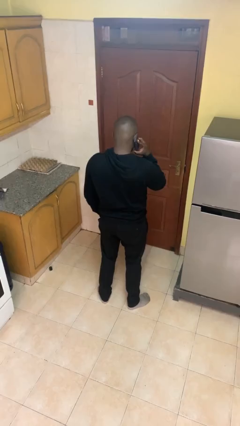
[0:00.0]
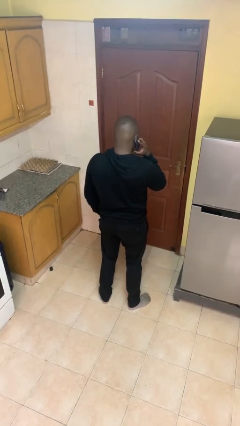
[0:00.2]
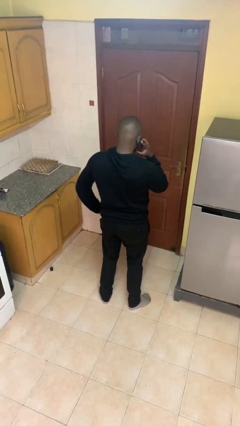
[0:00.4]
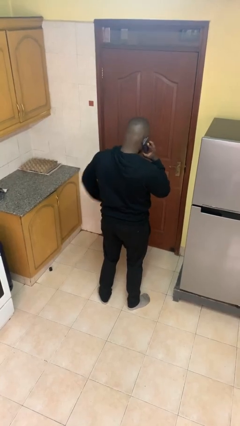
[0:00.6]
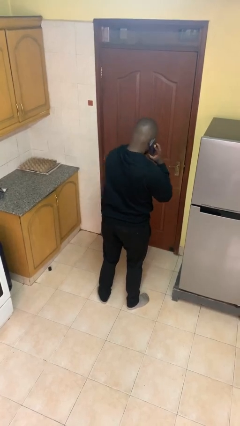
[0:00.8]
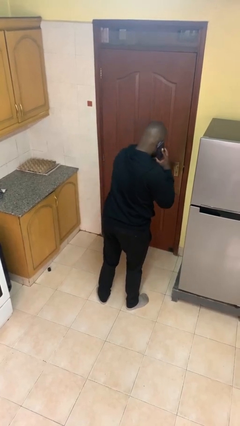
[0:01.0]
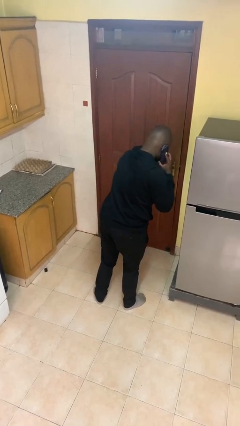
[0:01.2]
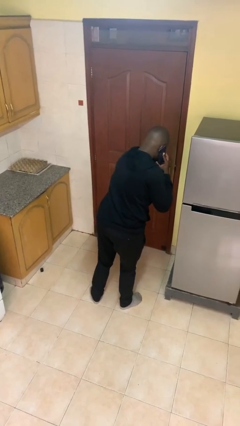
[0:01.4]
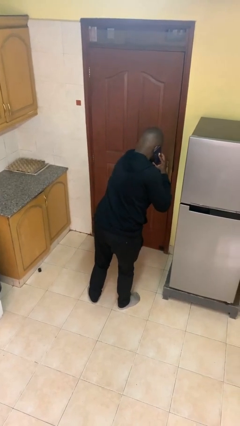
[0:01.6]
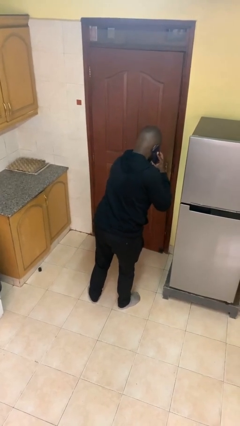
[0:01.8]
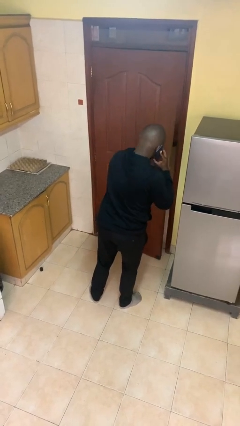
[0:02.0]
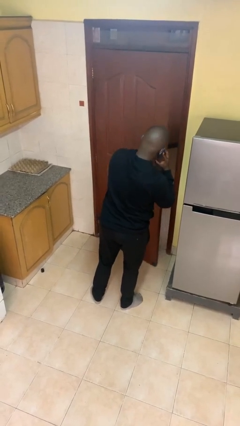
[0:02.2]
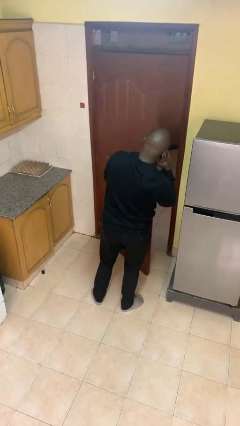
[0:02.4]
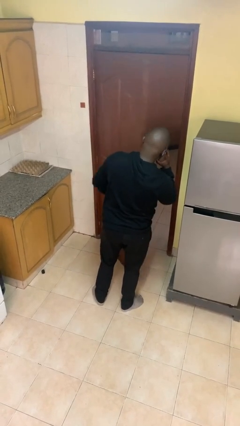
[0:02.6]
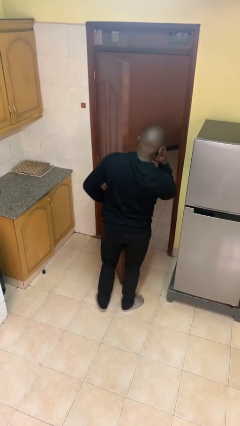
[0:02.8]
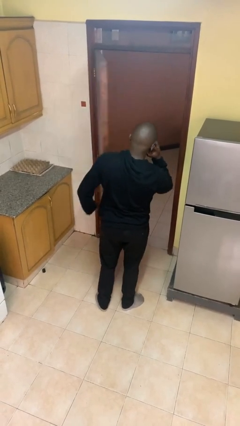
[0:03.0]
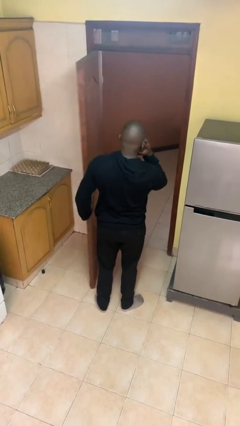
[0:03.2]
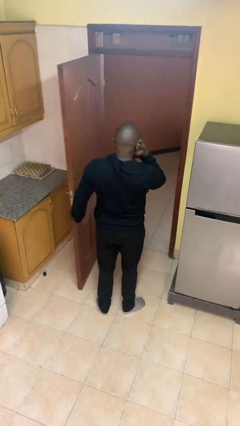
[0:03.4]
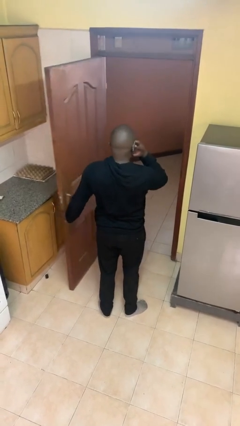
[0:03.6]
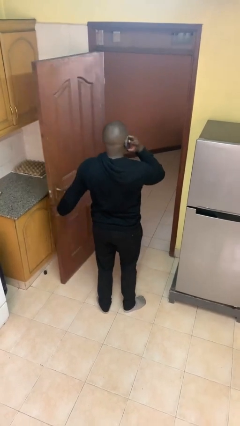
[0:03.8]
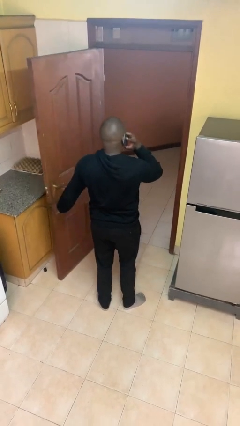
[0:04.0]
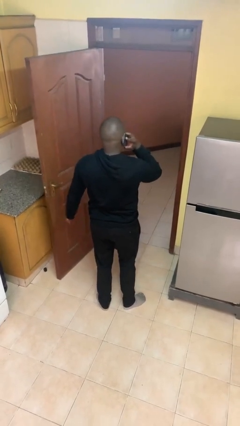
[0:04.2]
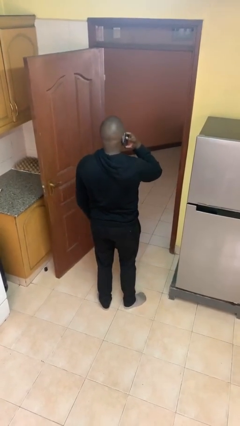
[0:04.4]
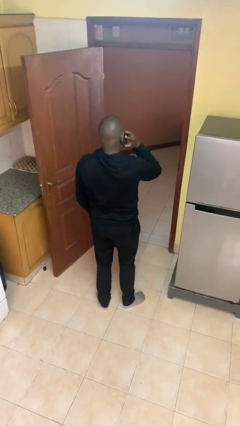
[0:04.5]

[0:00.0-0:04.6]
person opens facility door

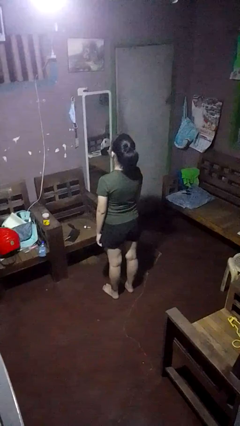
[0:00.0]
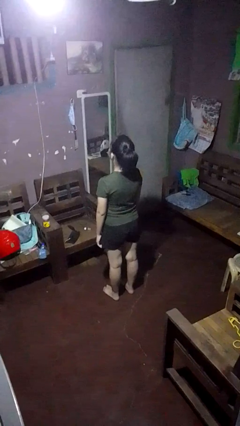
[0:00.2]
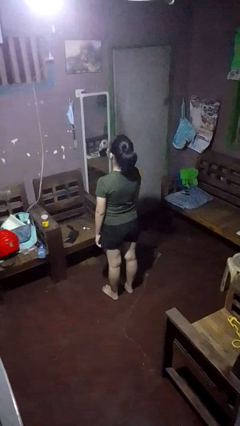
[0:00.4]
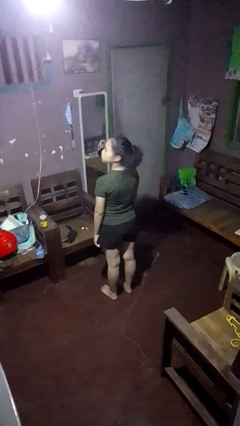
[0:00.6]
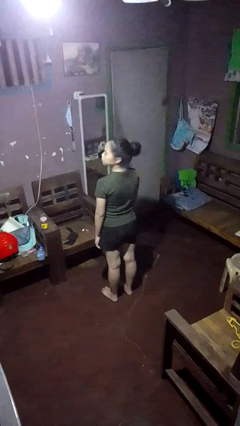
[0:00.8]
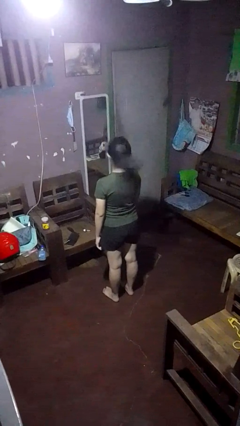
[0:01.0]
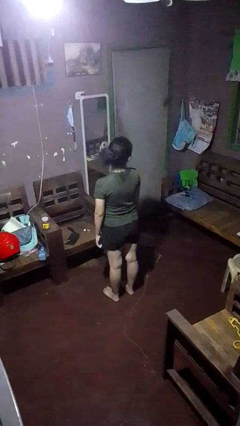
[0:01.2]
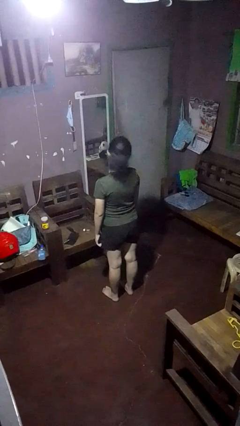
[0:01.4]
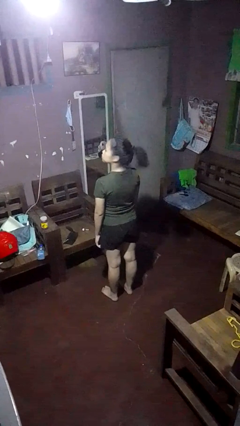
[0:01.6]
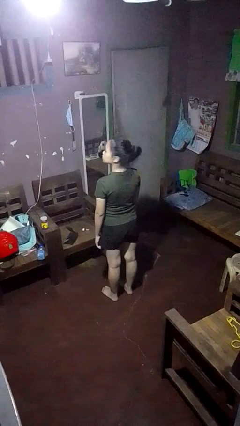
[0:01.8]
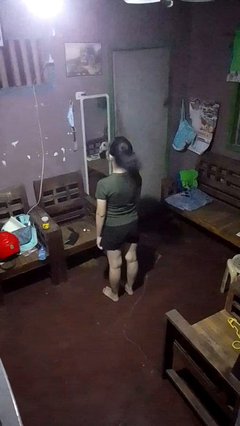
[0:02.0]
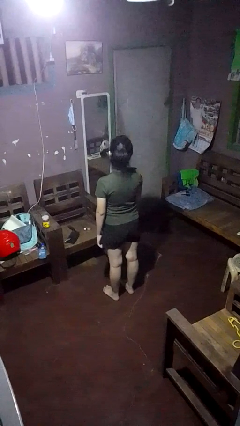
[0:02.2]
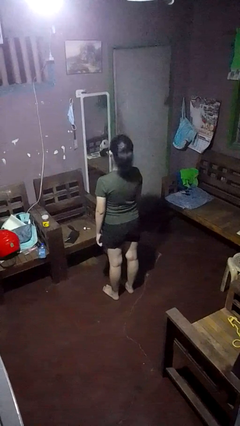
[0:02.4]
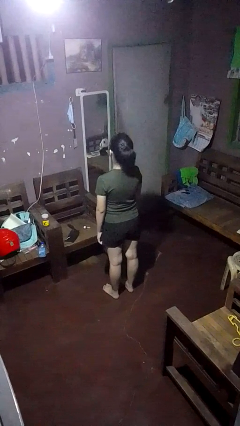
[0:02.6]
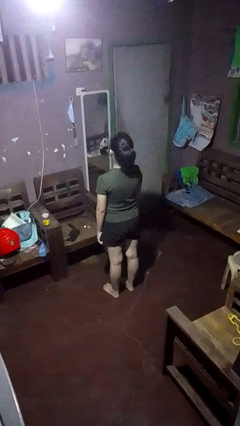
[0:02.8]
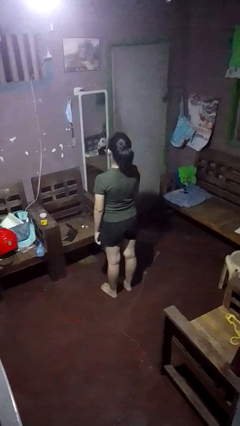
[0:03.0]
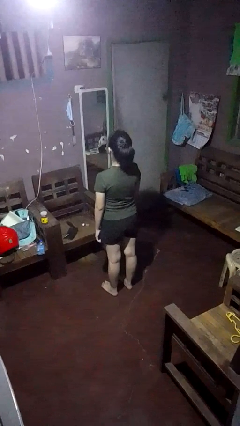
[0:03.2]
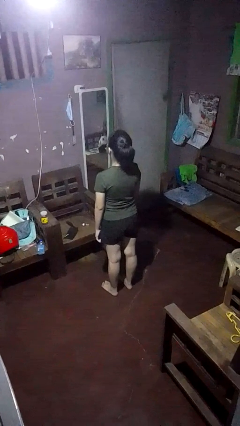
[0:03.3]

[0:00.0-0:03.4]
person shakes head

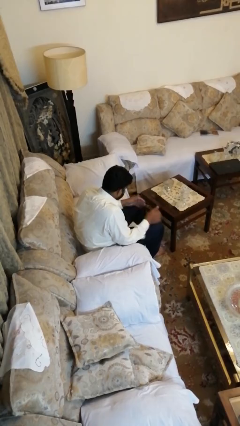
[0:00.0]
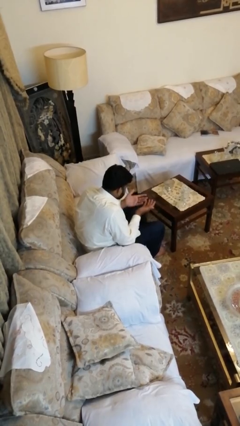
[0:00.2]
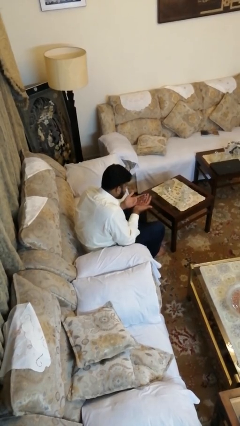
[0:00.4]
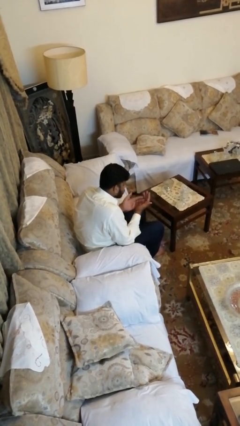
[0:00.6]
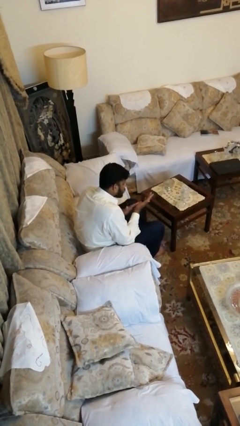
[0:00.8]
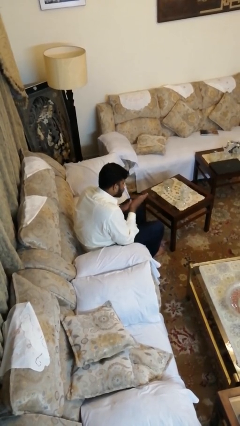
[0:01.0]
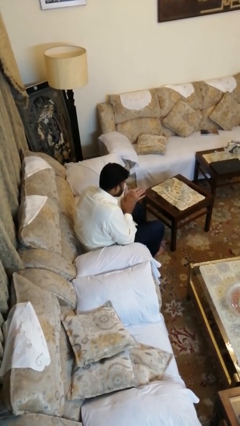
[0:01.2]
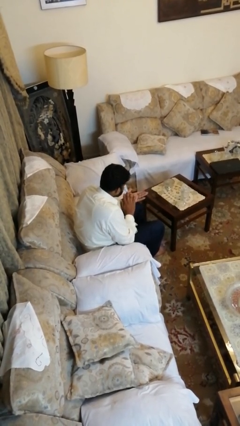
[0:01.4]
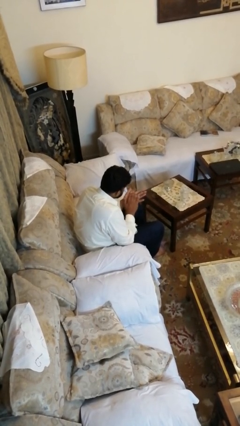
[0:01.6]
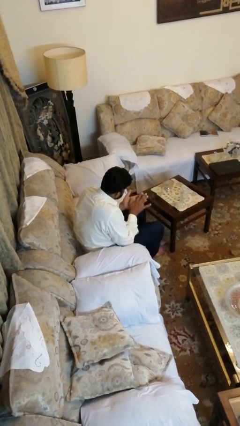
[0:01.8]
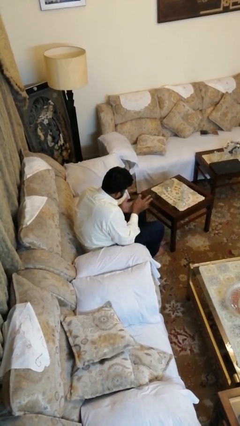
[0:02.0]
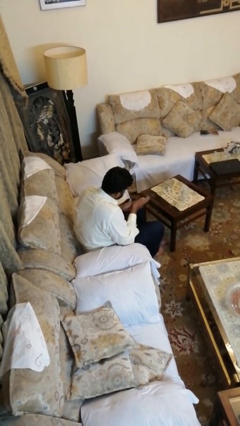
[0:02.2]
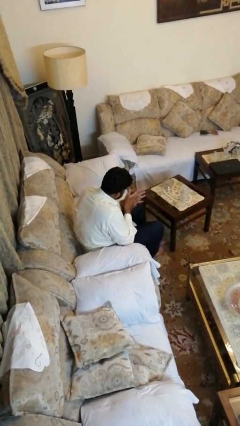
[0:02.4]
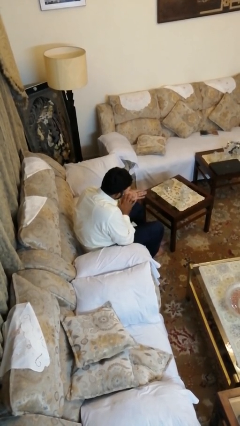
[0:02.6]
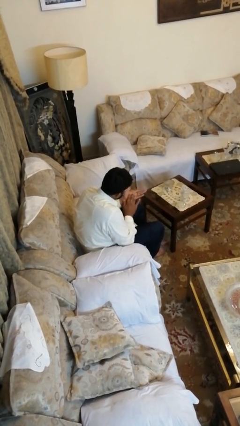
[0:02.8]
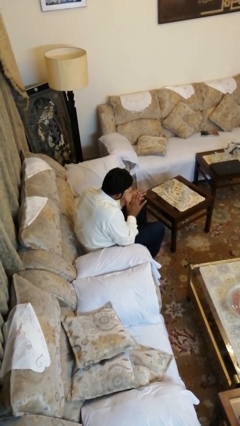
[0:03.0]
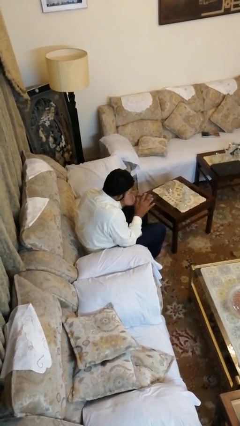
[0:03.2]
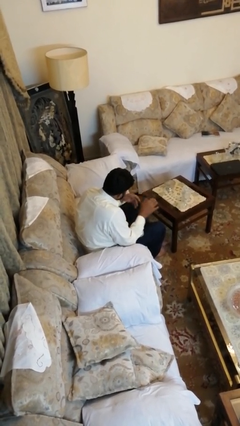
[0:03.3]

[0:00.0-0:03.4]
person looks at hands in lap

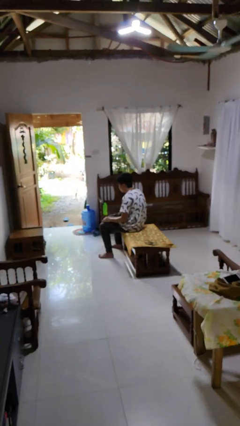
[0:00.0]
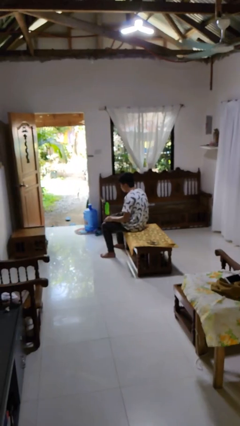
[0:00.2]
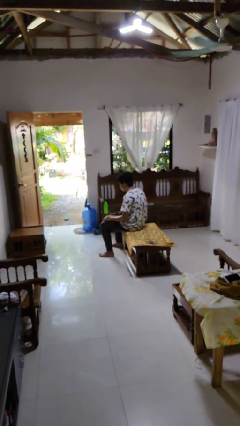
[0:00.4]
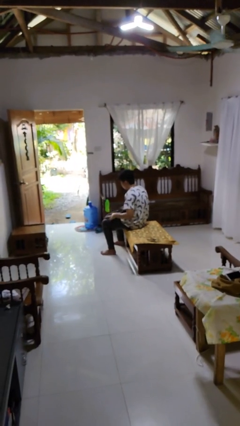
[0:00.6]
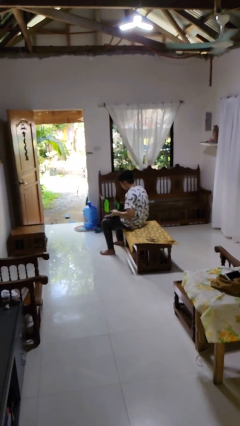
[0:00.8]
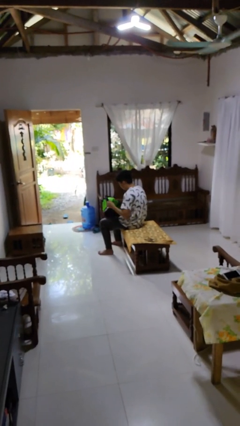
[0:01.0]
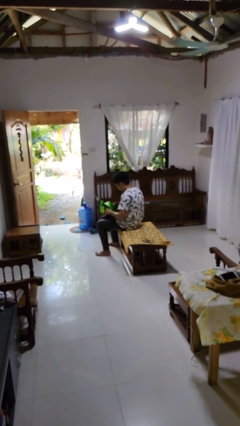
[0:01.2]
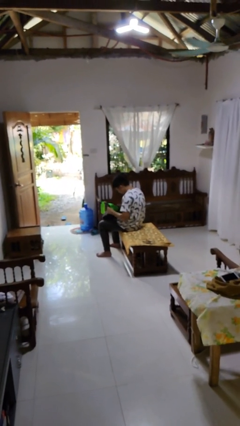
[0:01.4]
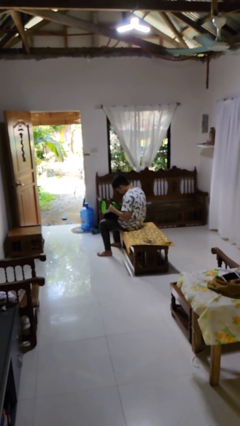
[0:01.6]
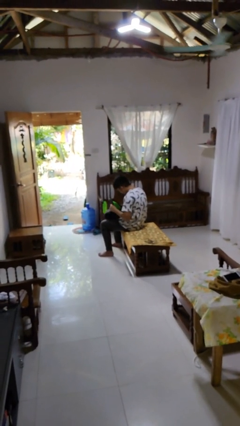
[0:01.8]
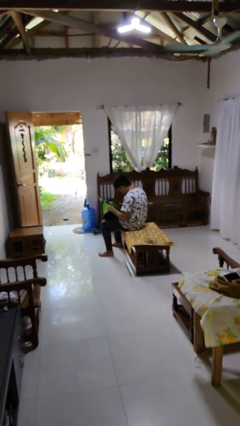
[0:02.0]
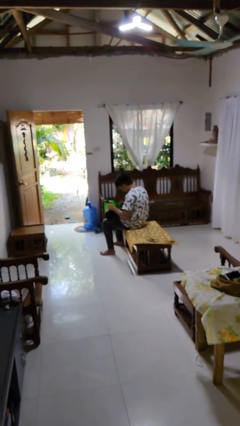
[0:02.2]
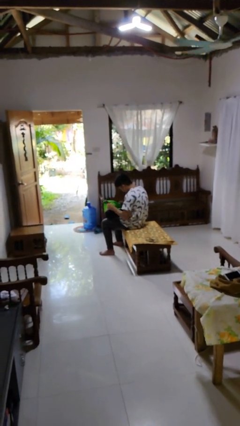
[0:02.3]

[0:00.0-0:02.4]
person searches in backpack

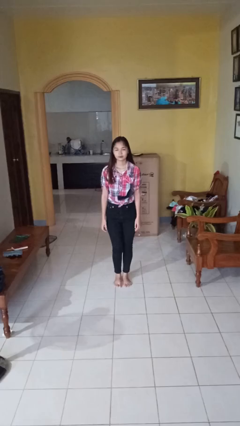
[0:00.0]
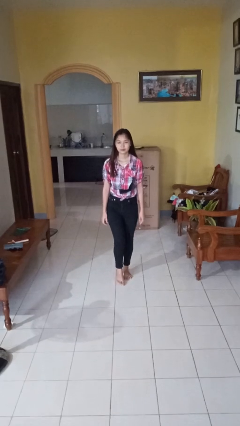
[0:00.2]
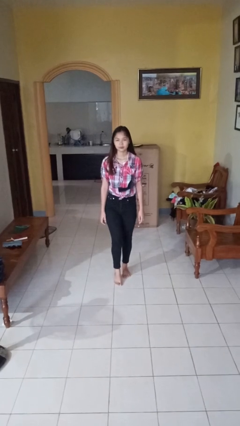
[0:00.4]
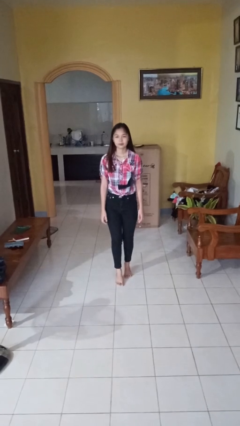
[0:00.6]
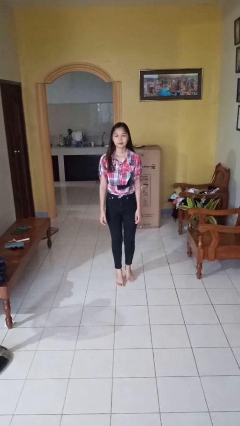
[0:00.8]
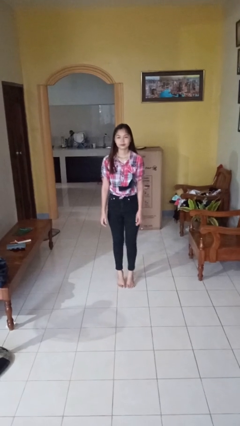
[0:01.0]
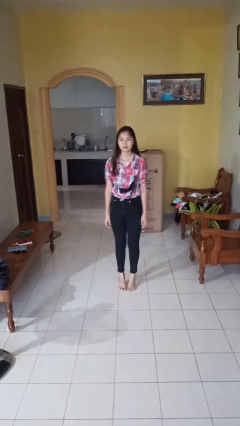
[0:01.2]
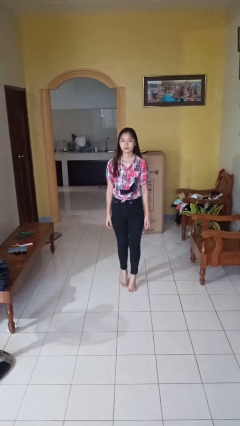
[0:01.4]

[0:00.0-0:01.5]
person walks tiptoe

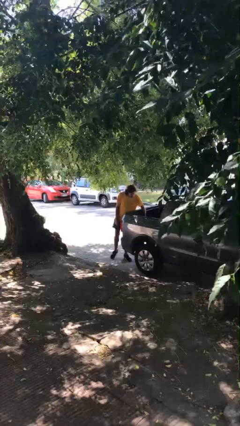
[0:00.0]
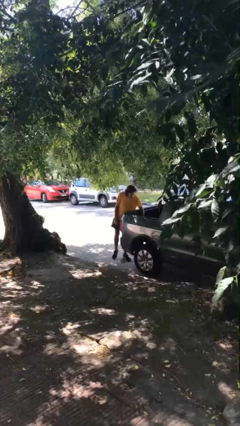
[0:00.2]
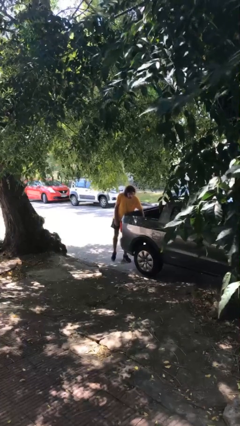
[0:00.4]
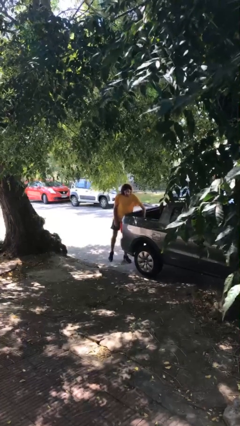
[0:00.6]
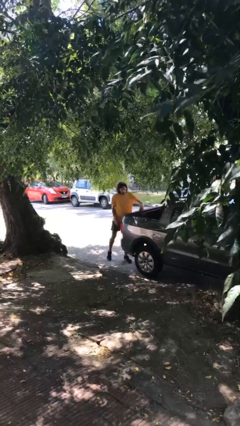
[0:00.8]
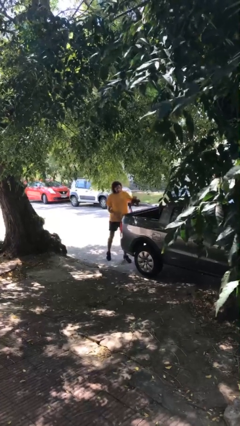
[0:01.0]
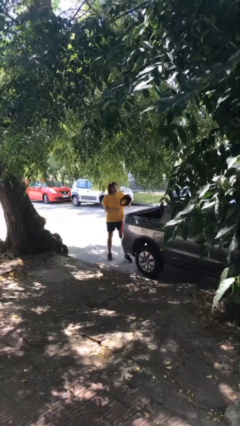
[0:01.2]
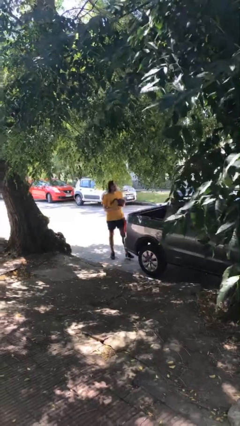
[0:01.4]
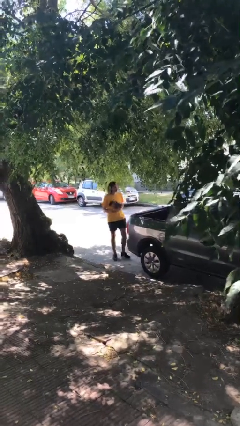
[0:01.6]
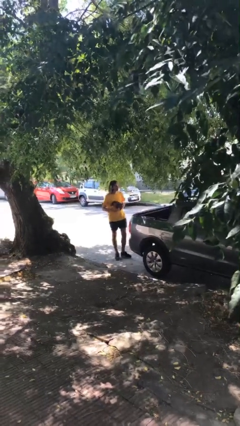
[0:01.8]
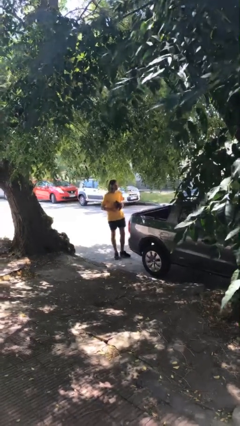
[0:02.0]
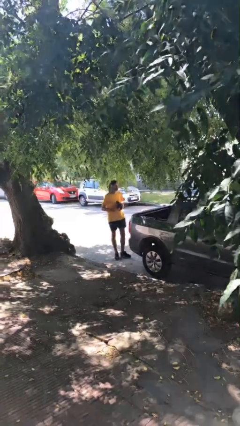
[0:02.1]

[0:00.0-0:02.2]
person unloads car
